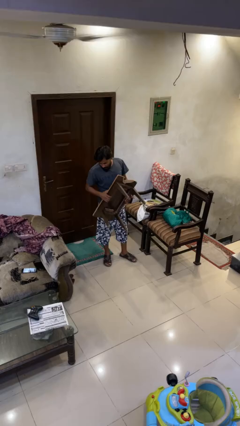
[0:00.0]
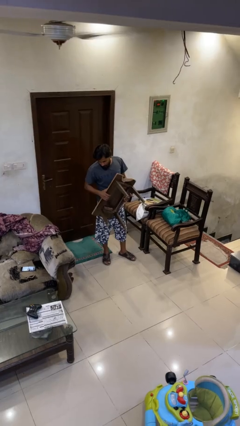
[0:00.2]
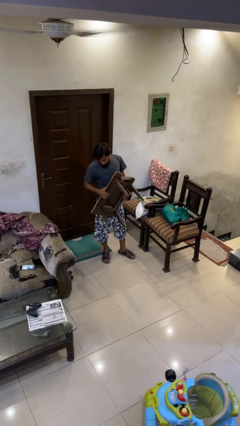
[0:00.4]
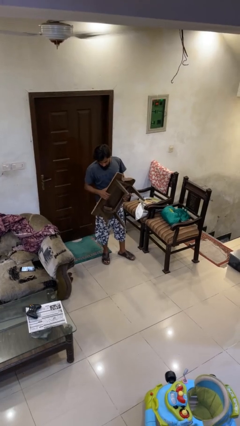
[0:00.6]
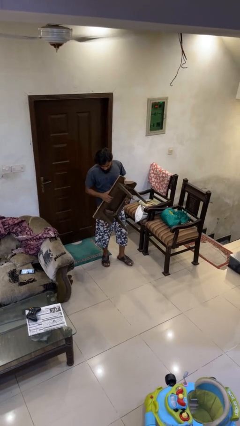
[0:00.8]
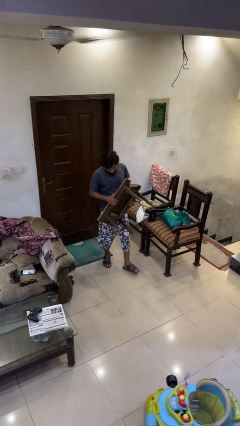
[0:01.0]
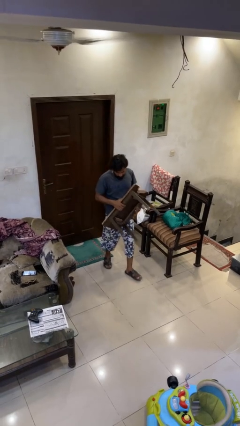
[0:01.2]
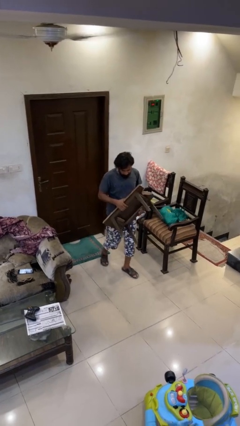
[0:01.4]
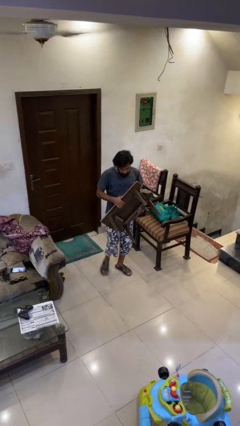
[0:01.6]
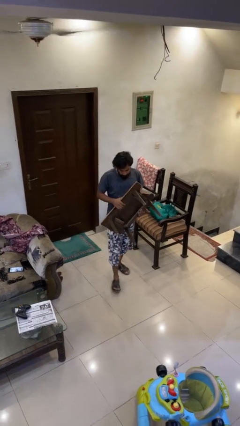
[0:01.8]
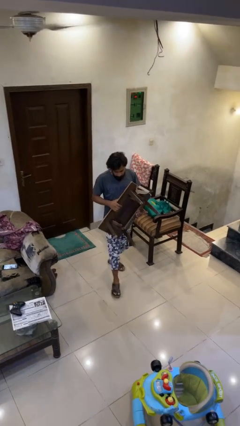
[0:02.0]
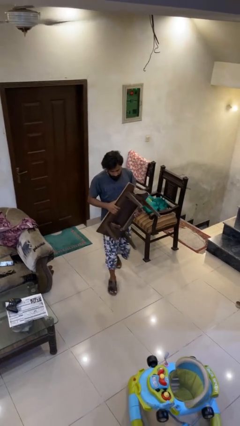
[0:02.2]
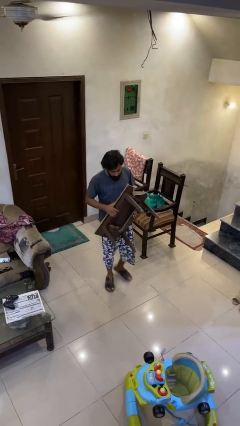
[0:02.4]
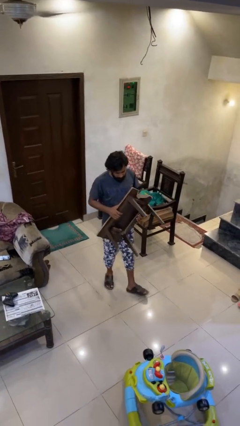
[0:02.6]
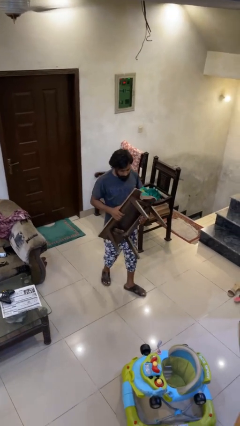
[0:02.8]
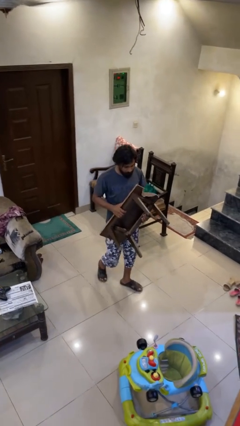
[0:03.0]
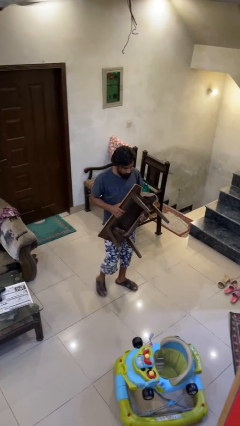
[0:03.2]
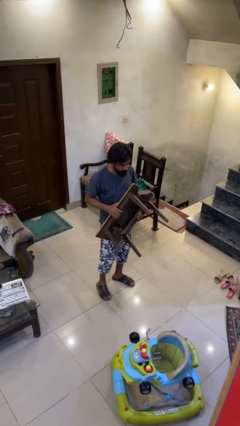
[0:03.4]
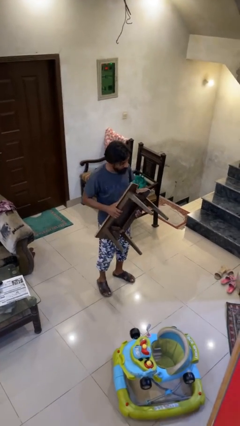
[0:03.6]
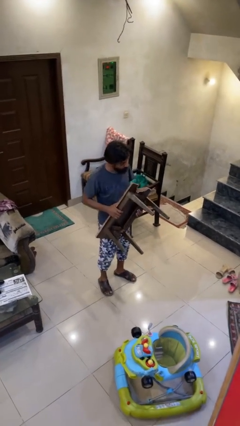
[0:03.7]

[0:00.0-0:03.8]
person carries furniture

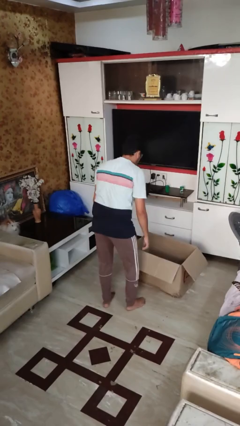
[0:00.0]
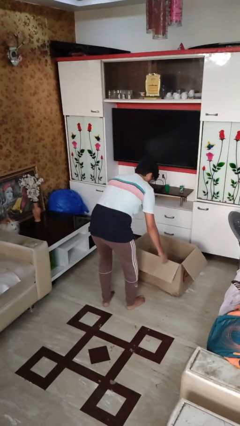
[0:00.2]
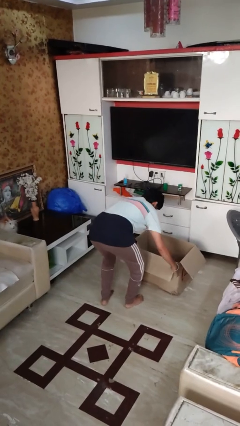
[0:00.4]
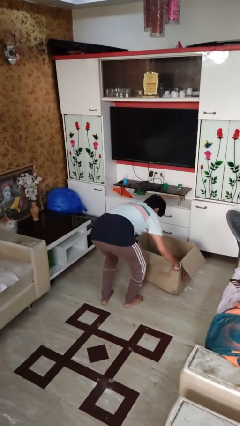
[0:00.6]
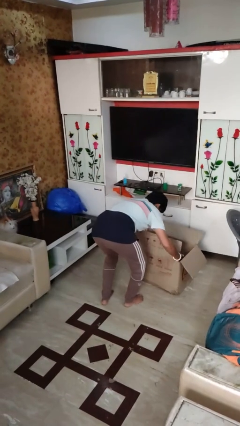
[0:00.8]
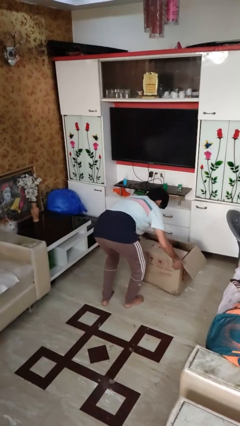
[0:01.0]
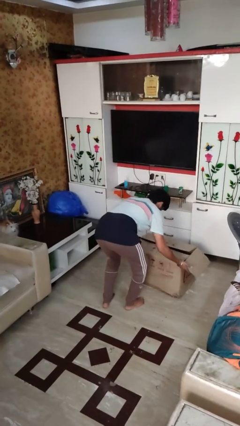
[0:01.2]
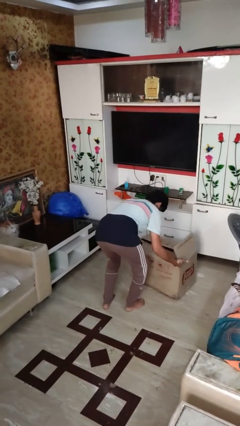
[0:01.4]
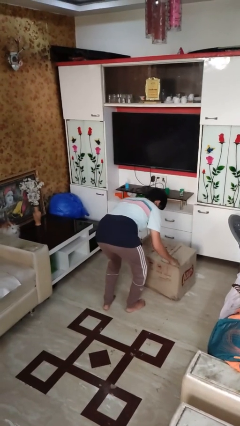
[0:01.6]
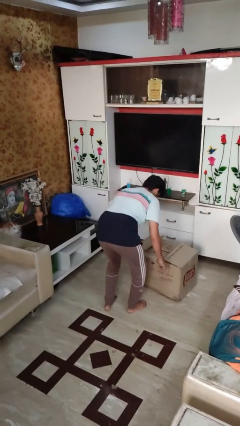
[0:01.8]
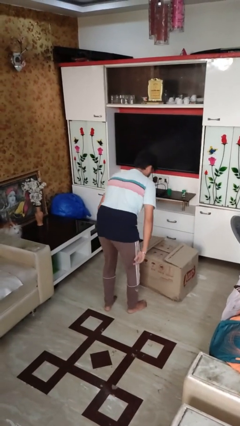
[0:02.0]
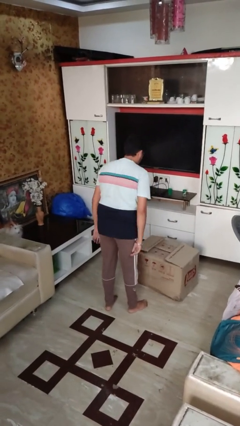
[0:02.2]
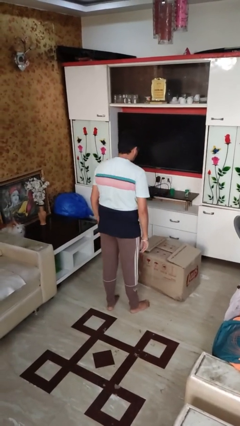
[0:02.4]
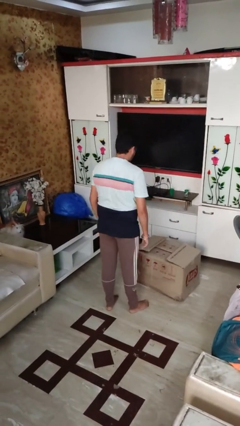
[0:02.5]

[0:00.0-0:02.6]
person closes box

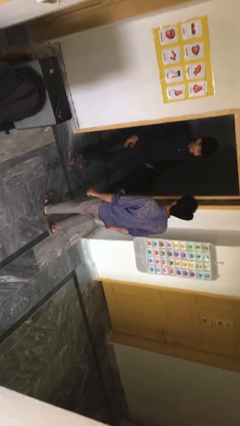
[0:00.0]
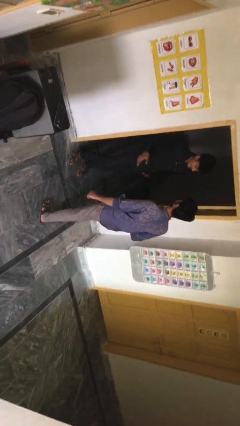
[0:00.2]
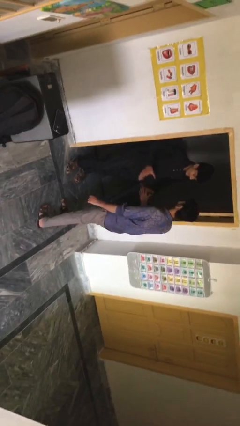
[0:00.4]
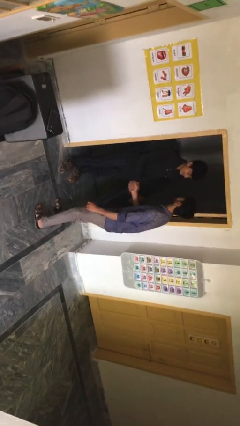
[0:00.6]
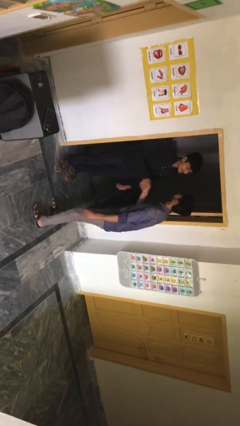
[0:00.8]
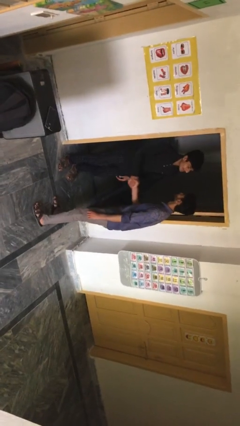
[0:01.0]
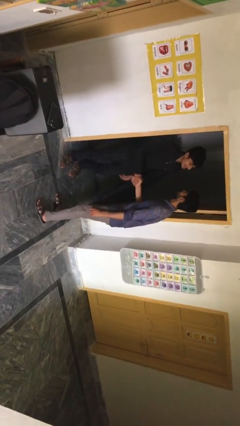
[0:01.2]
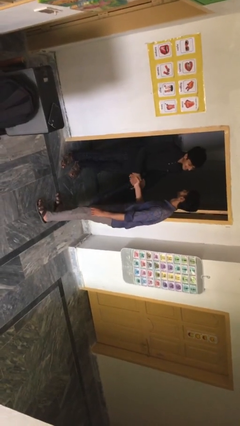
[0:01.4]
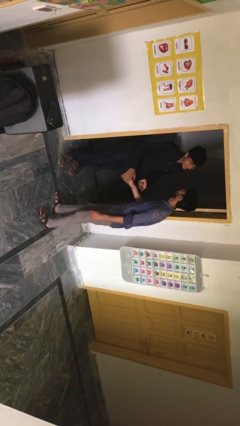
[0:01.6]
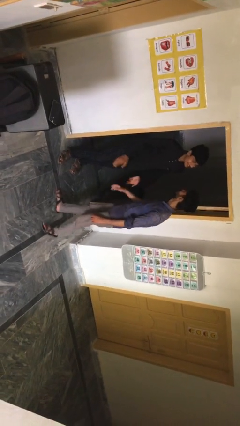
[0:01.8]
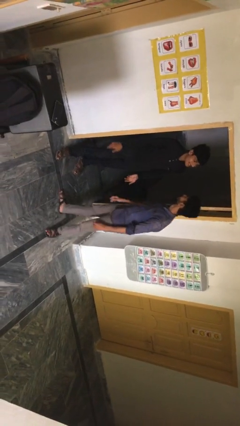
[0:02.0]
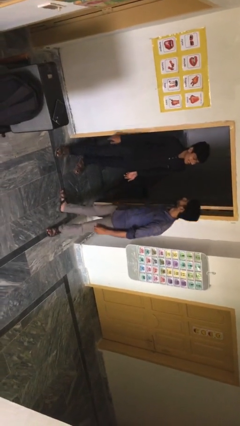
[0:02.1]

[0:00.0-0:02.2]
person shakes hand

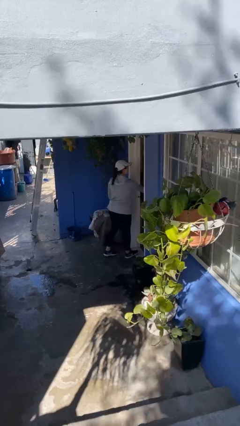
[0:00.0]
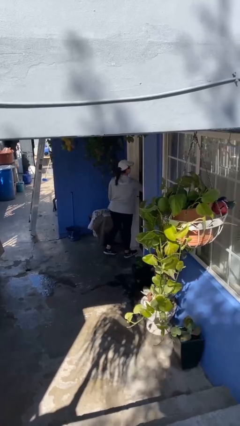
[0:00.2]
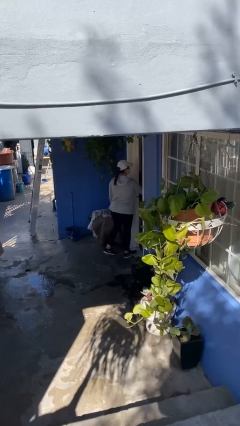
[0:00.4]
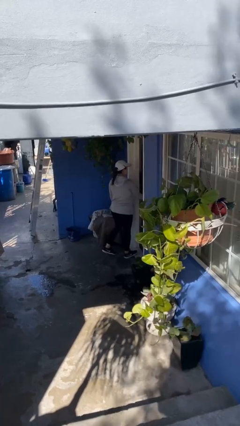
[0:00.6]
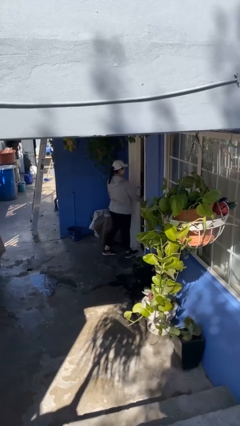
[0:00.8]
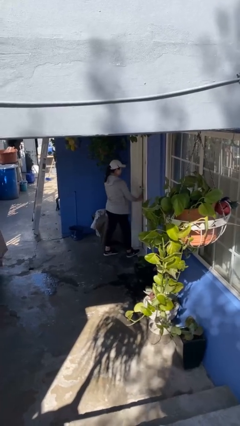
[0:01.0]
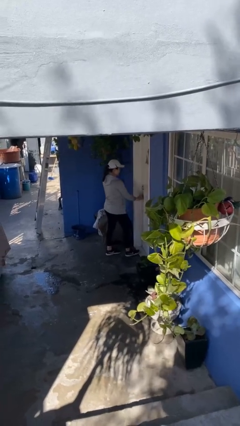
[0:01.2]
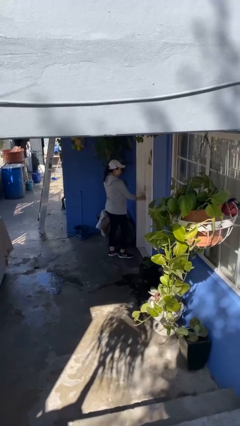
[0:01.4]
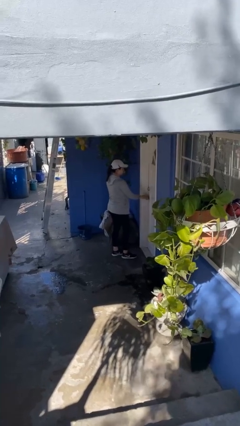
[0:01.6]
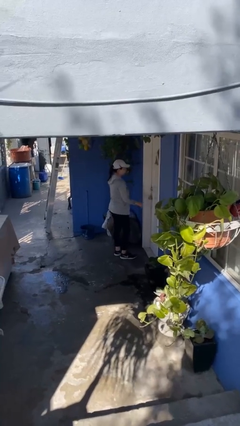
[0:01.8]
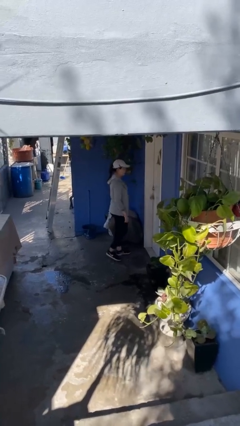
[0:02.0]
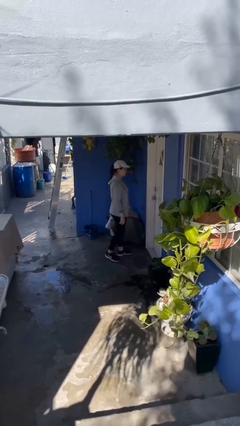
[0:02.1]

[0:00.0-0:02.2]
person closes facility door

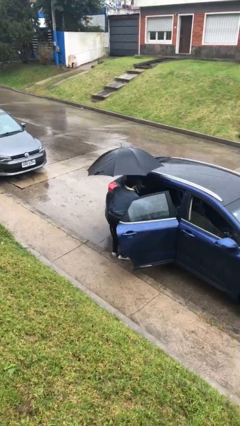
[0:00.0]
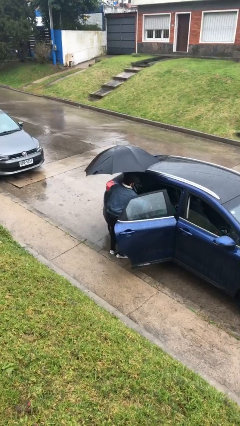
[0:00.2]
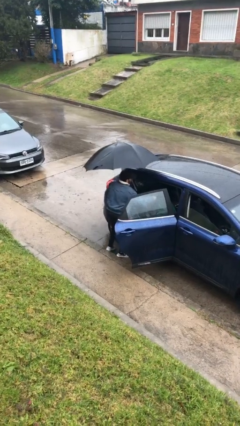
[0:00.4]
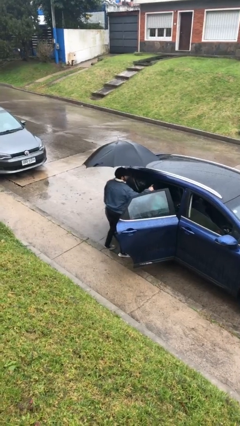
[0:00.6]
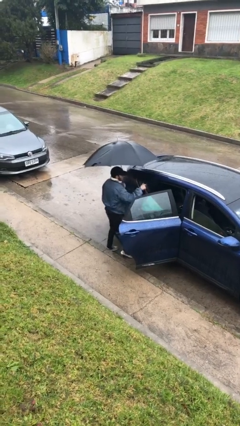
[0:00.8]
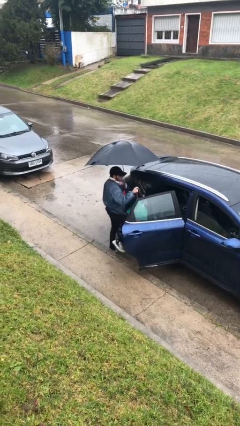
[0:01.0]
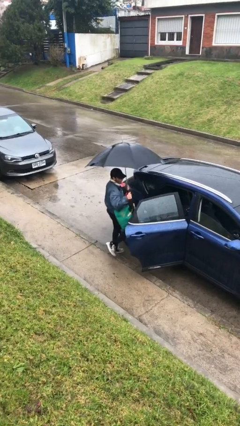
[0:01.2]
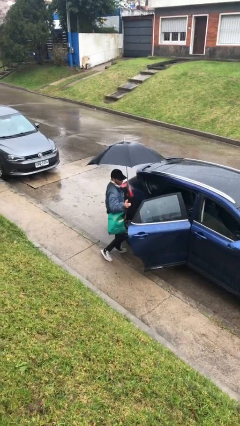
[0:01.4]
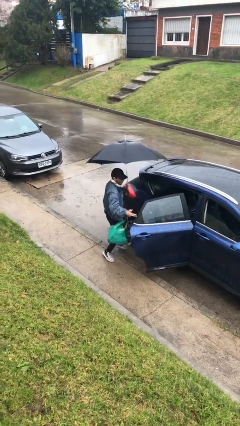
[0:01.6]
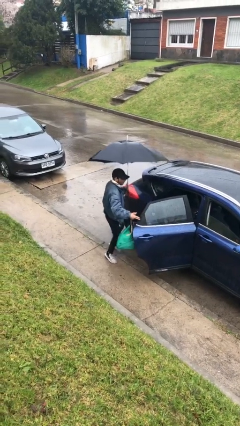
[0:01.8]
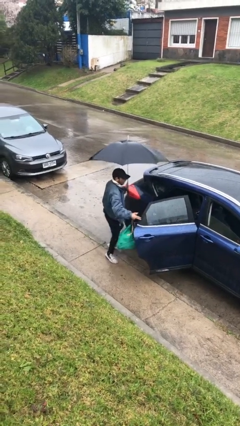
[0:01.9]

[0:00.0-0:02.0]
person unloads car

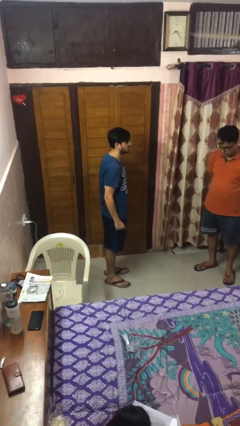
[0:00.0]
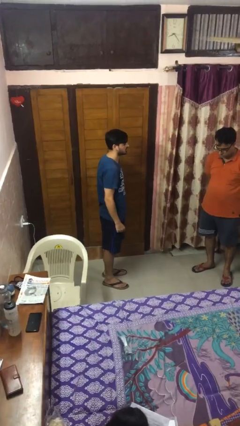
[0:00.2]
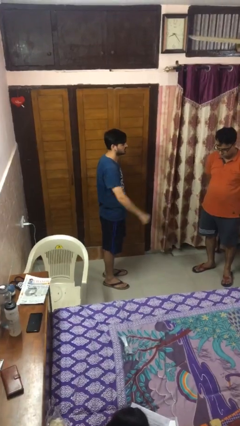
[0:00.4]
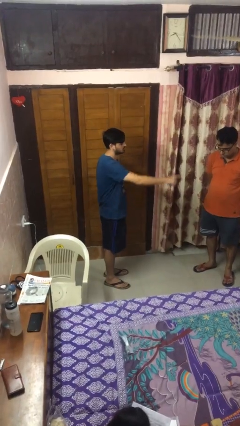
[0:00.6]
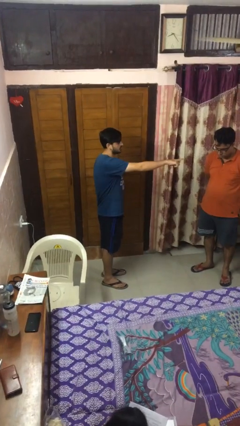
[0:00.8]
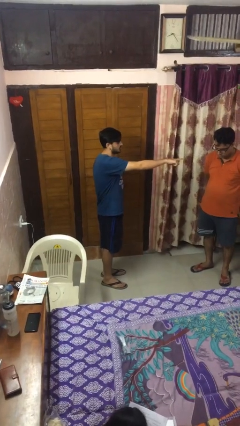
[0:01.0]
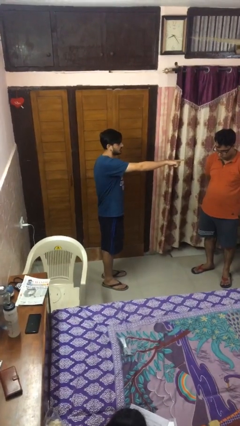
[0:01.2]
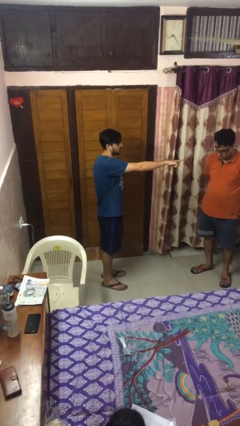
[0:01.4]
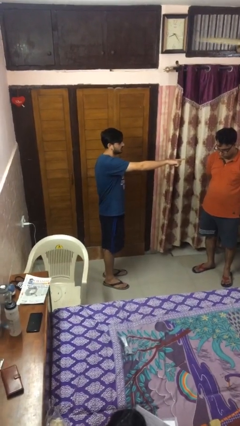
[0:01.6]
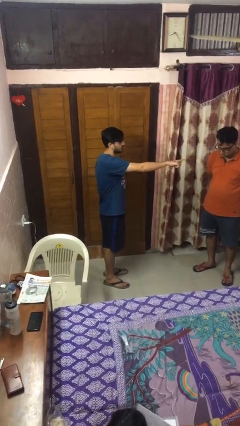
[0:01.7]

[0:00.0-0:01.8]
person points at person

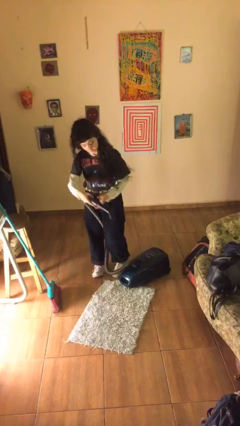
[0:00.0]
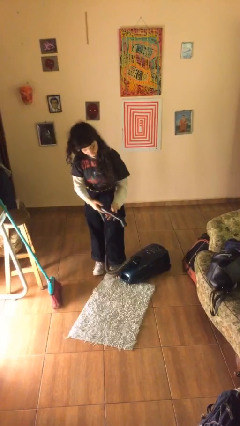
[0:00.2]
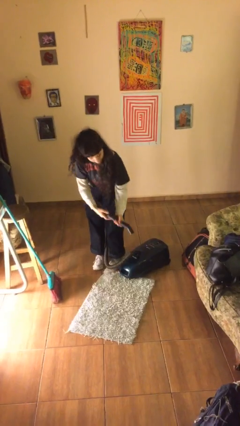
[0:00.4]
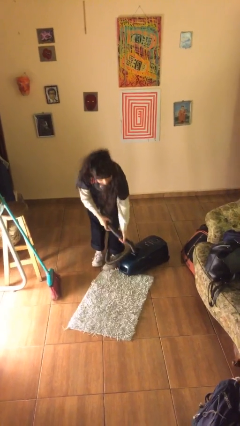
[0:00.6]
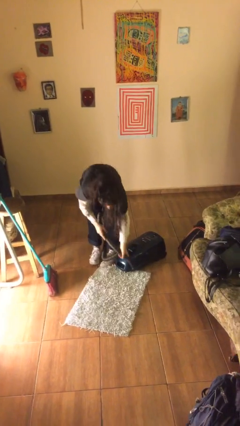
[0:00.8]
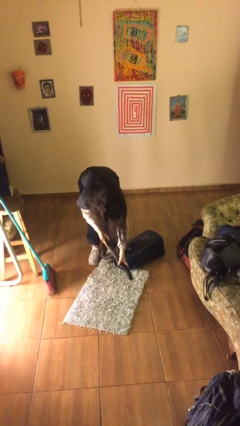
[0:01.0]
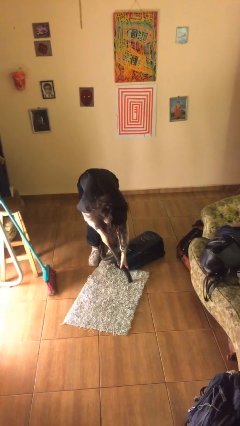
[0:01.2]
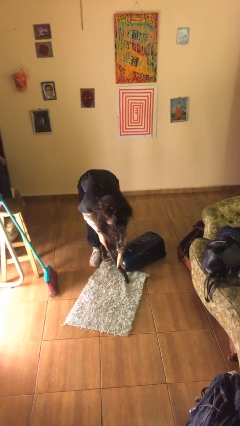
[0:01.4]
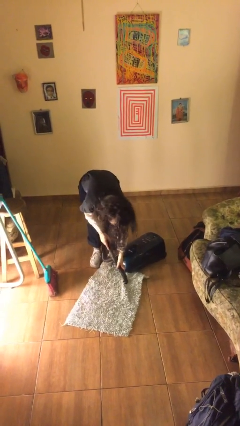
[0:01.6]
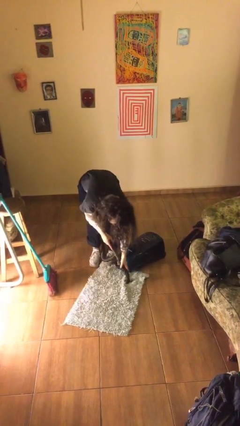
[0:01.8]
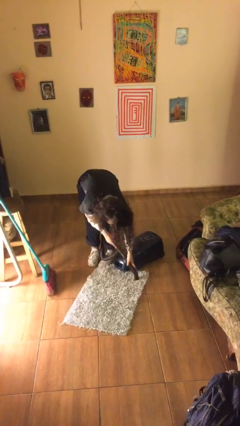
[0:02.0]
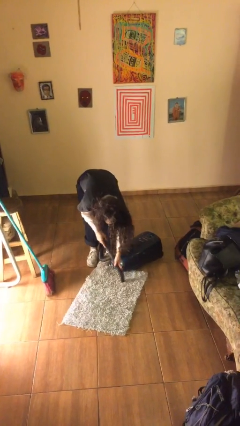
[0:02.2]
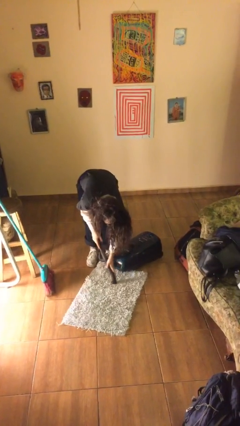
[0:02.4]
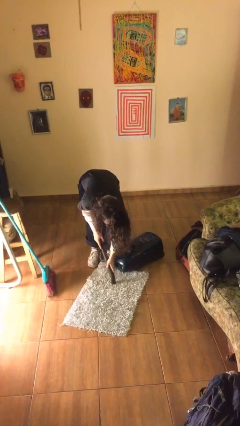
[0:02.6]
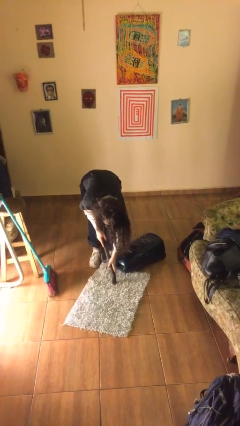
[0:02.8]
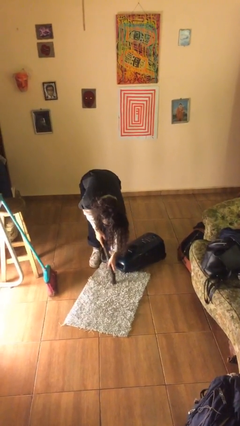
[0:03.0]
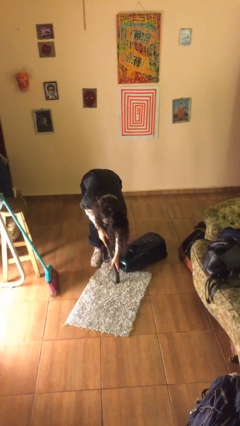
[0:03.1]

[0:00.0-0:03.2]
person vacuums carpet
